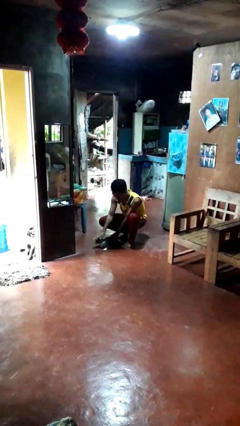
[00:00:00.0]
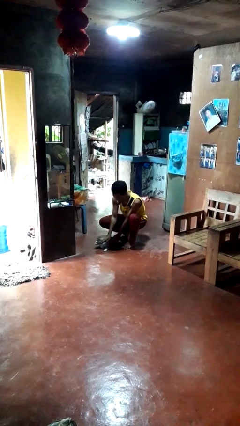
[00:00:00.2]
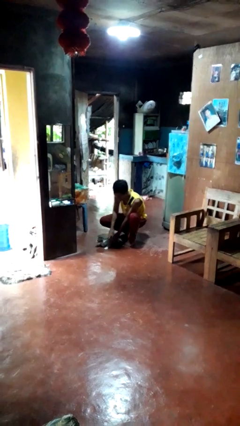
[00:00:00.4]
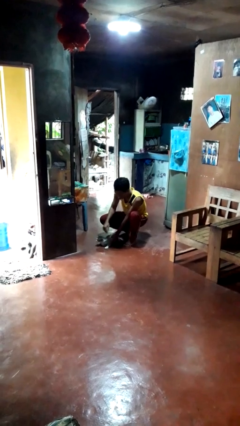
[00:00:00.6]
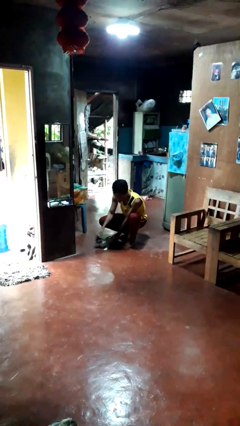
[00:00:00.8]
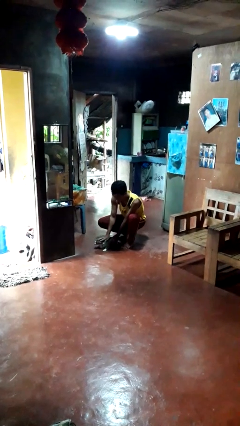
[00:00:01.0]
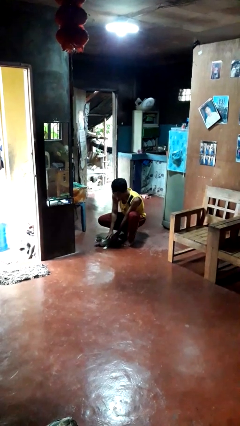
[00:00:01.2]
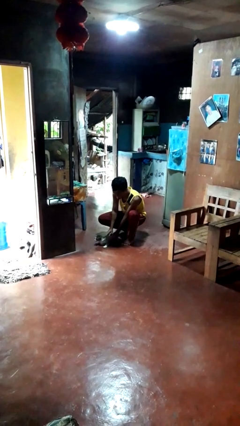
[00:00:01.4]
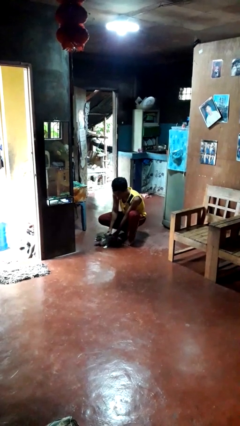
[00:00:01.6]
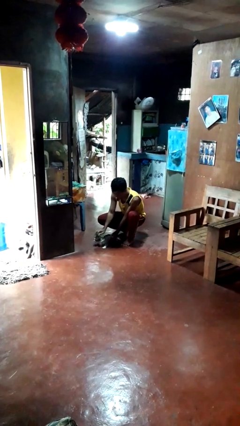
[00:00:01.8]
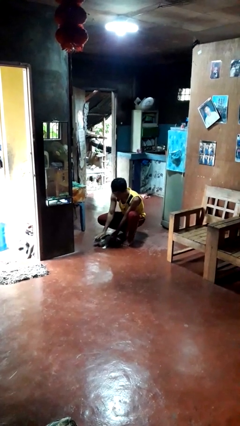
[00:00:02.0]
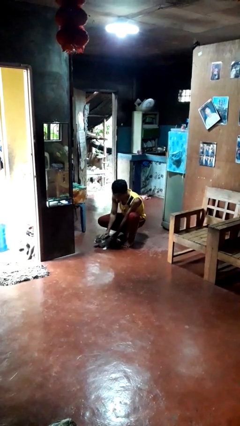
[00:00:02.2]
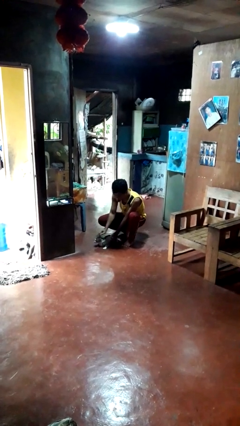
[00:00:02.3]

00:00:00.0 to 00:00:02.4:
person pets cat

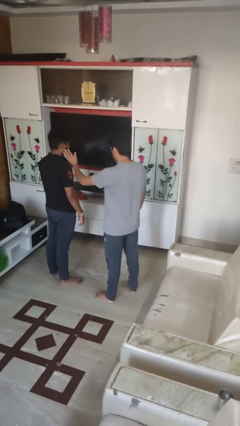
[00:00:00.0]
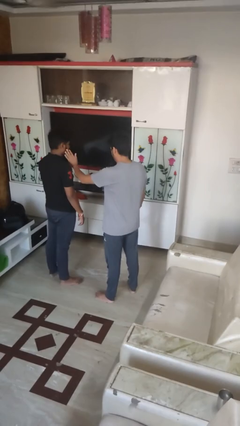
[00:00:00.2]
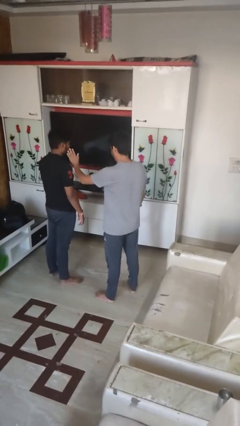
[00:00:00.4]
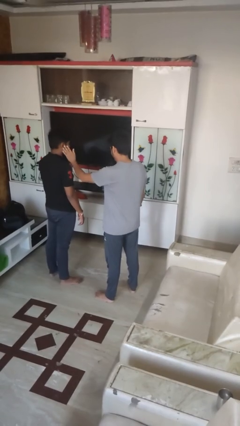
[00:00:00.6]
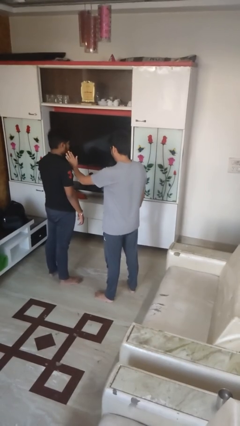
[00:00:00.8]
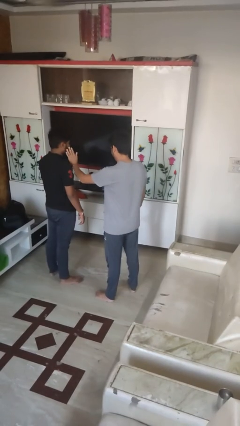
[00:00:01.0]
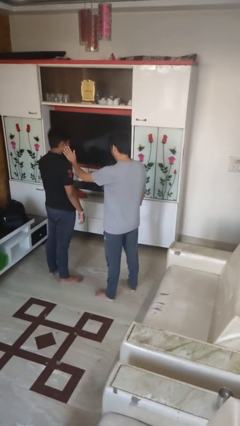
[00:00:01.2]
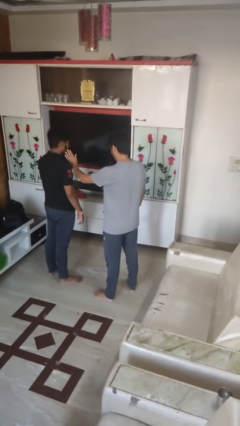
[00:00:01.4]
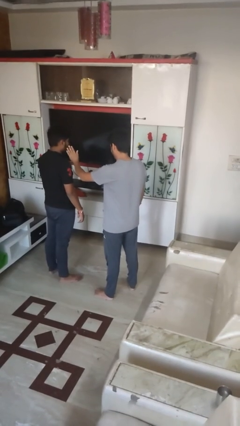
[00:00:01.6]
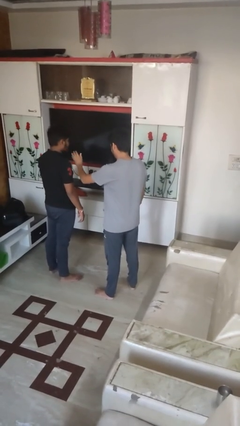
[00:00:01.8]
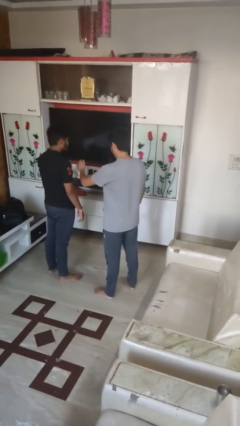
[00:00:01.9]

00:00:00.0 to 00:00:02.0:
person touches face of person

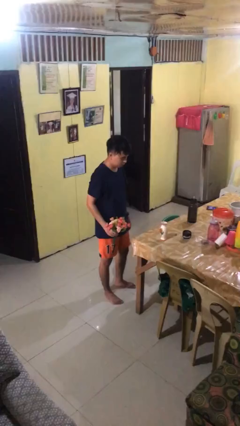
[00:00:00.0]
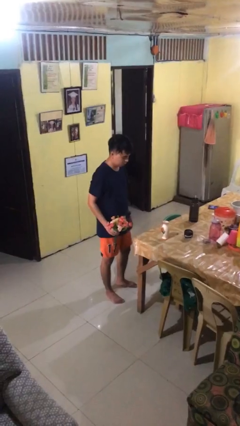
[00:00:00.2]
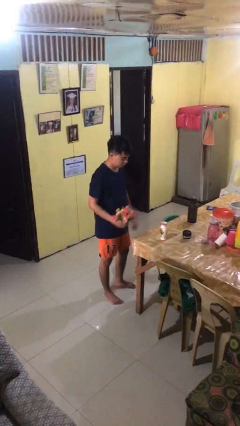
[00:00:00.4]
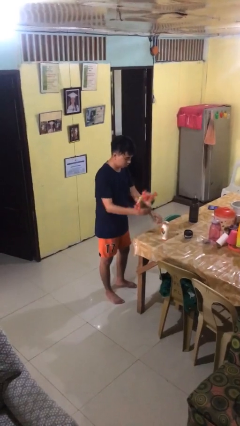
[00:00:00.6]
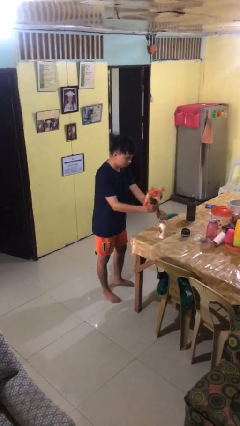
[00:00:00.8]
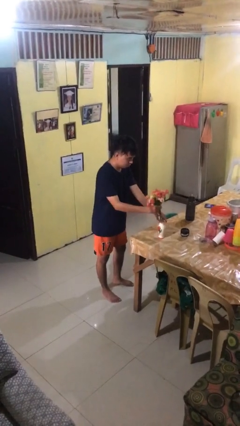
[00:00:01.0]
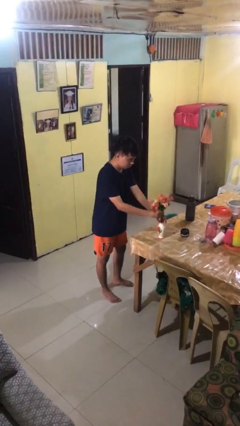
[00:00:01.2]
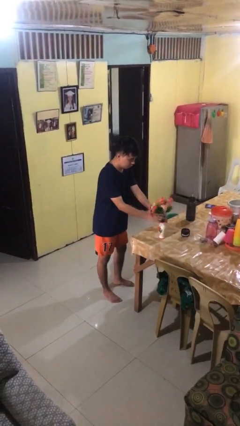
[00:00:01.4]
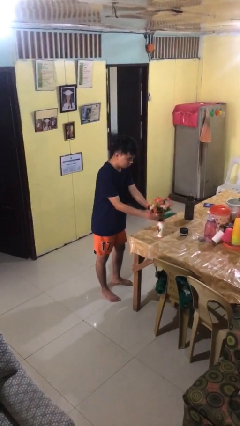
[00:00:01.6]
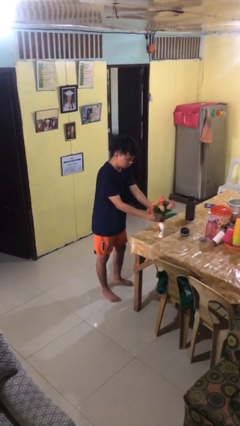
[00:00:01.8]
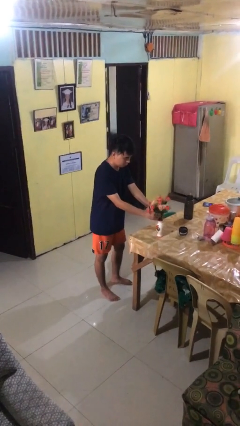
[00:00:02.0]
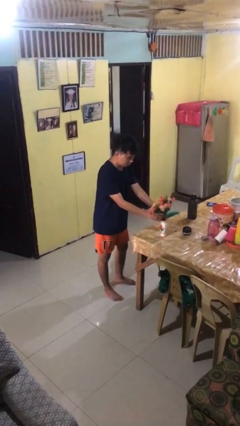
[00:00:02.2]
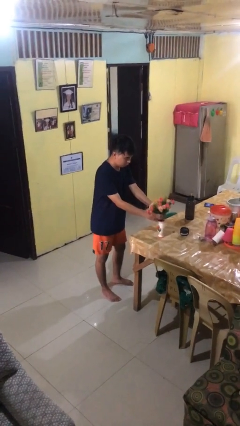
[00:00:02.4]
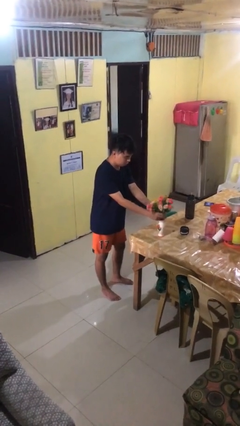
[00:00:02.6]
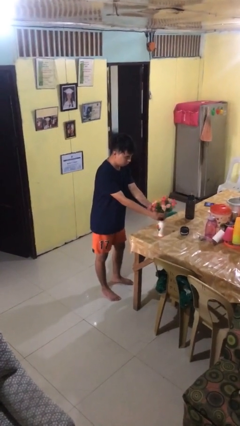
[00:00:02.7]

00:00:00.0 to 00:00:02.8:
person arranges flowers in vase

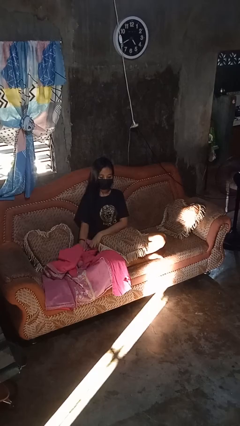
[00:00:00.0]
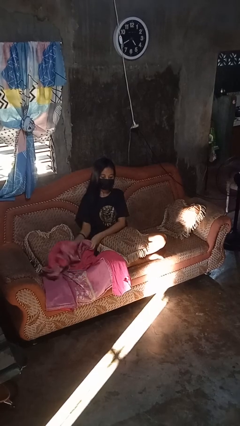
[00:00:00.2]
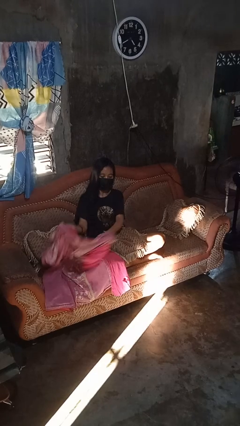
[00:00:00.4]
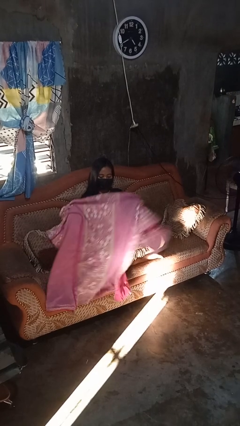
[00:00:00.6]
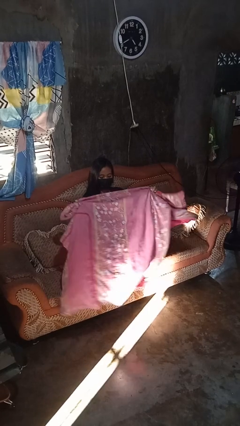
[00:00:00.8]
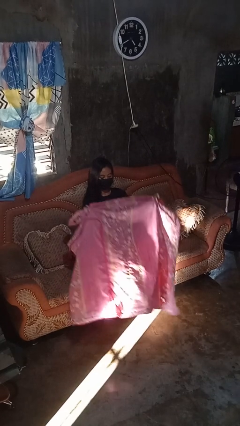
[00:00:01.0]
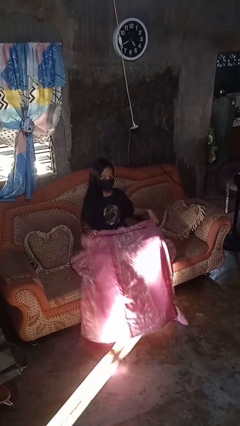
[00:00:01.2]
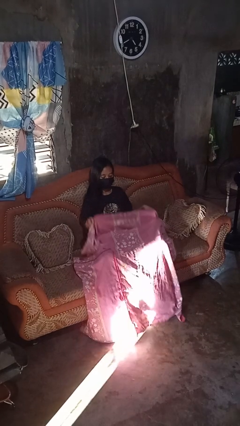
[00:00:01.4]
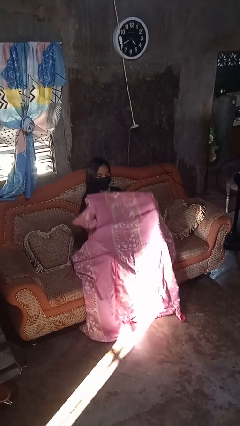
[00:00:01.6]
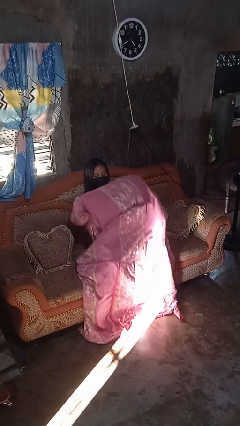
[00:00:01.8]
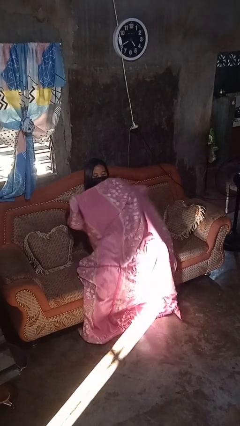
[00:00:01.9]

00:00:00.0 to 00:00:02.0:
person covers with blanket

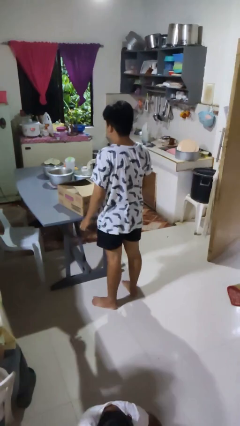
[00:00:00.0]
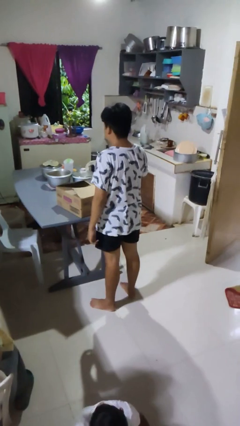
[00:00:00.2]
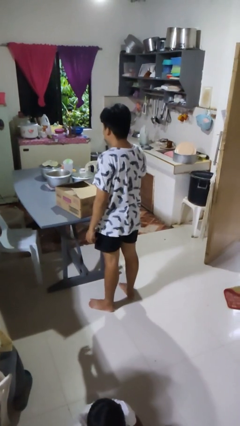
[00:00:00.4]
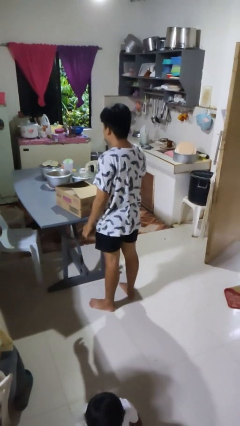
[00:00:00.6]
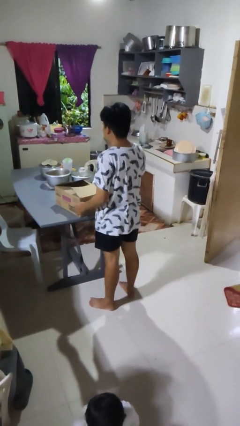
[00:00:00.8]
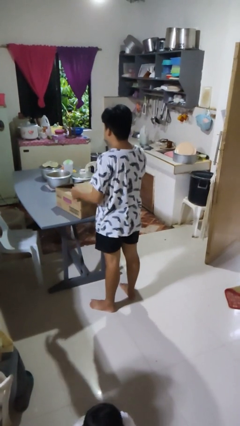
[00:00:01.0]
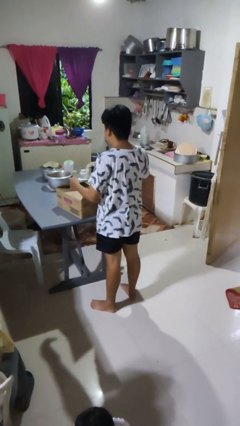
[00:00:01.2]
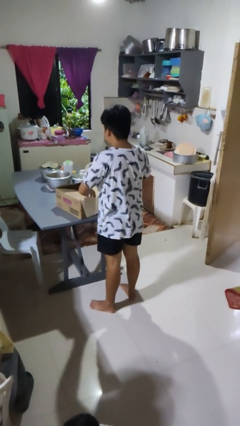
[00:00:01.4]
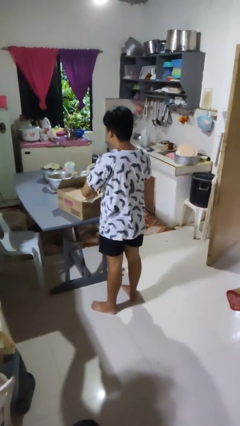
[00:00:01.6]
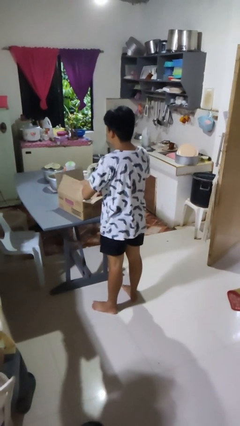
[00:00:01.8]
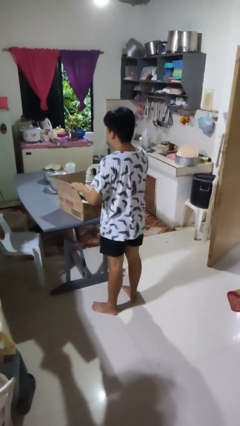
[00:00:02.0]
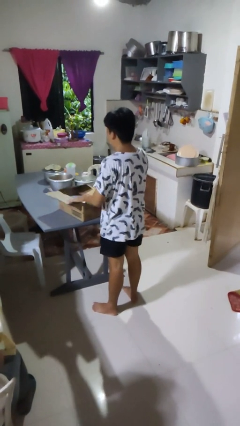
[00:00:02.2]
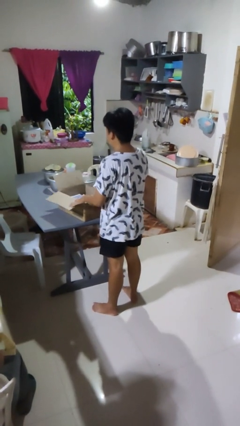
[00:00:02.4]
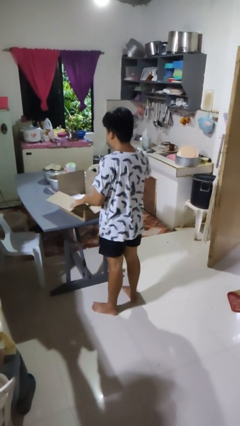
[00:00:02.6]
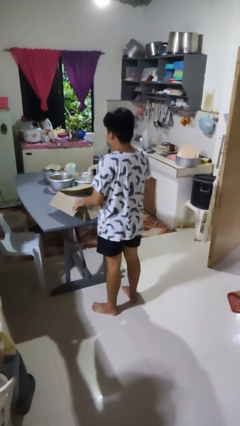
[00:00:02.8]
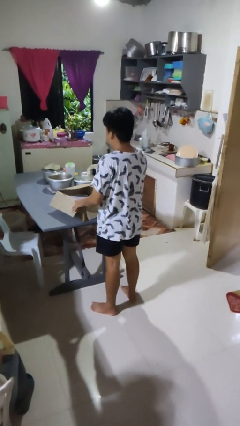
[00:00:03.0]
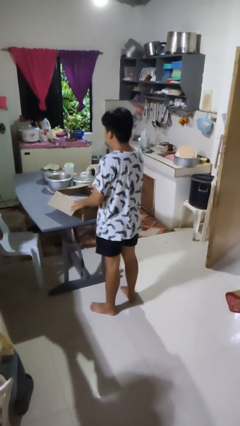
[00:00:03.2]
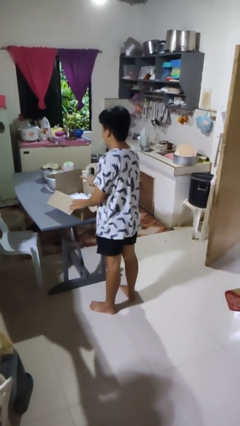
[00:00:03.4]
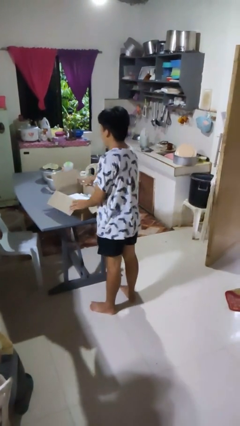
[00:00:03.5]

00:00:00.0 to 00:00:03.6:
person opens box

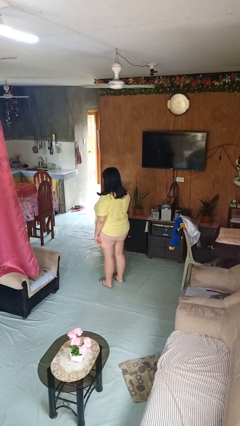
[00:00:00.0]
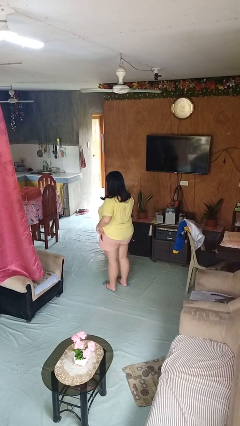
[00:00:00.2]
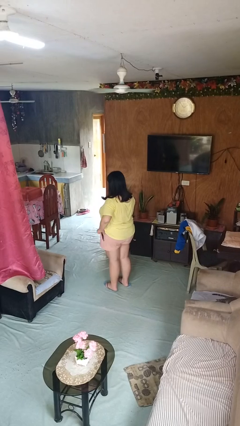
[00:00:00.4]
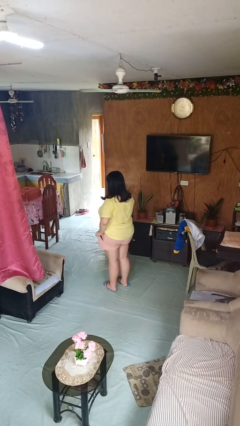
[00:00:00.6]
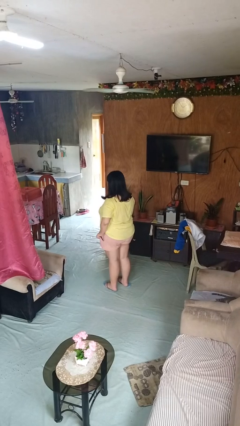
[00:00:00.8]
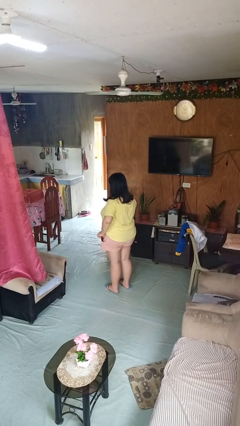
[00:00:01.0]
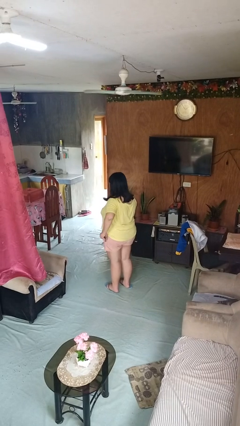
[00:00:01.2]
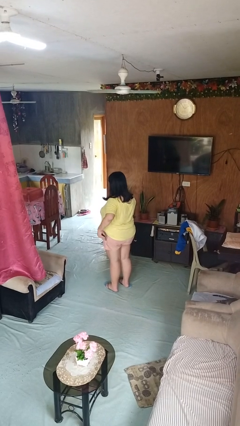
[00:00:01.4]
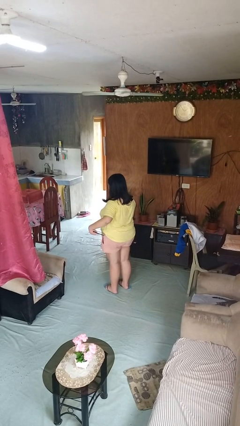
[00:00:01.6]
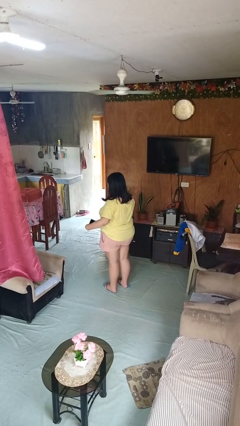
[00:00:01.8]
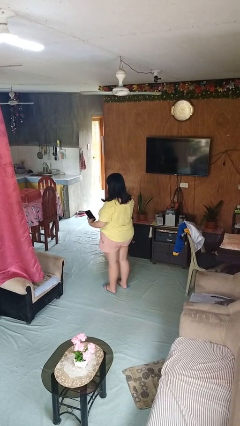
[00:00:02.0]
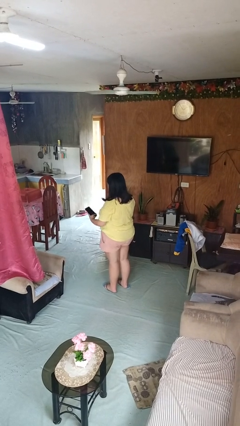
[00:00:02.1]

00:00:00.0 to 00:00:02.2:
person takes phone from pocket

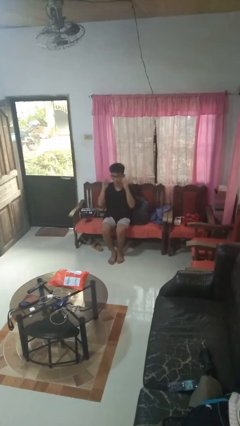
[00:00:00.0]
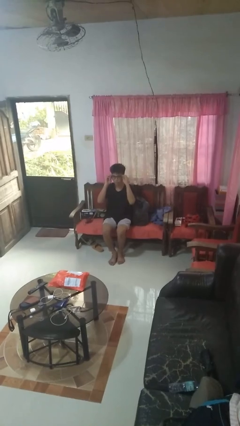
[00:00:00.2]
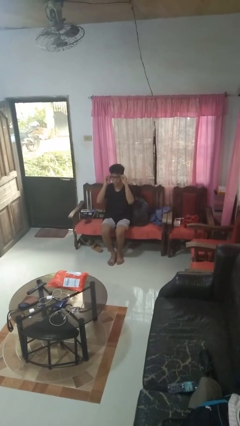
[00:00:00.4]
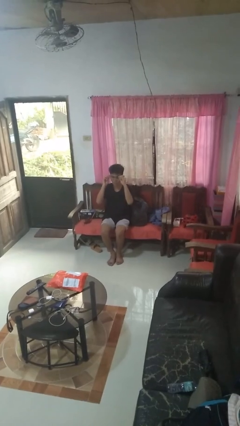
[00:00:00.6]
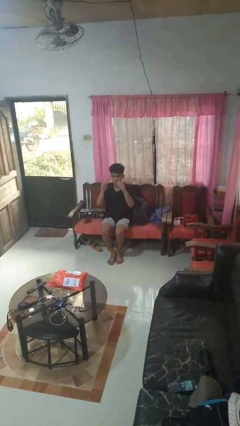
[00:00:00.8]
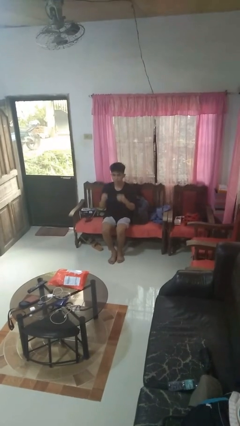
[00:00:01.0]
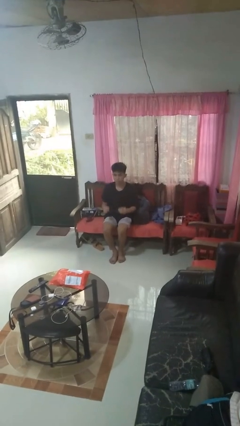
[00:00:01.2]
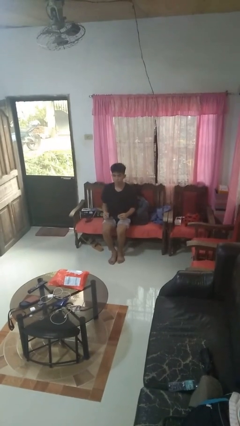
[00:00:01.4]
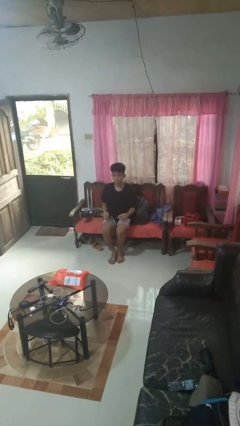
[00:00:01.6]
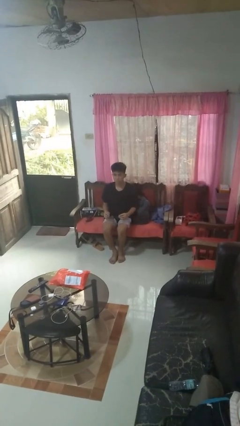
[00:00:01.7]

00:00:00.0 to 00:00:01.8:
person takes off glasses
